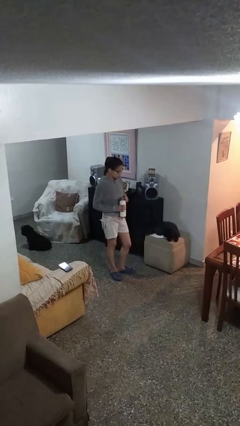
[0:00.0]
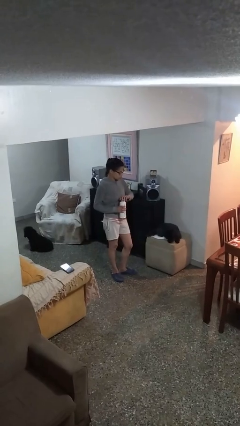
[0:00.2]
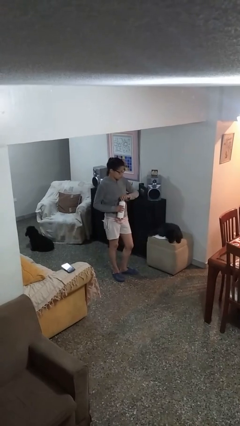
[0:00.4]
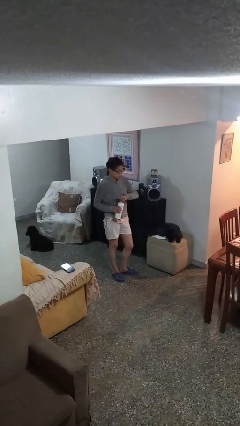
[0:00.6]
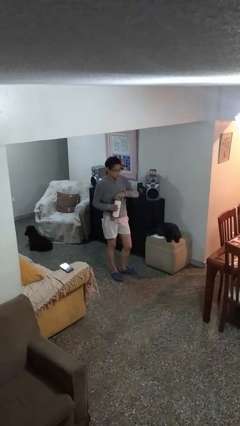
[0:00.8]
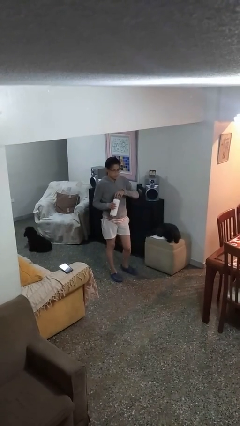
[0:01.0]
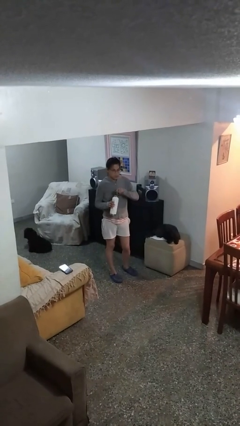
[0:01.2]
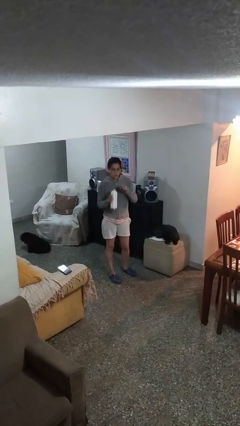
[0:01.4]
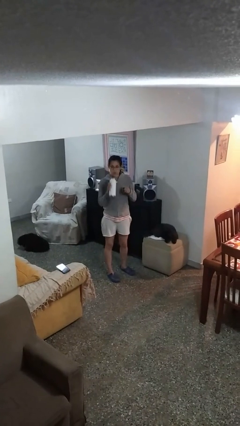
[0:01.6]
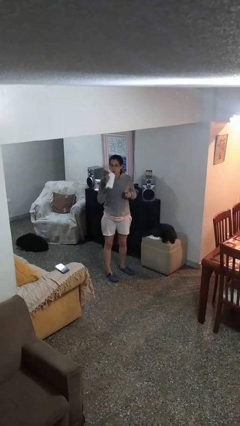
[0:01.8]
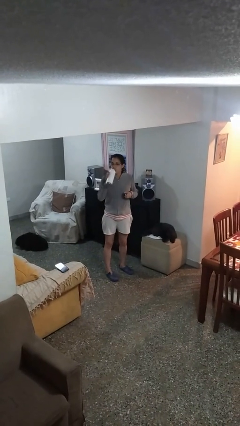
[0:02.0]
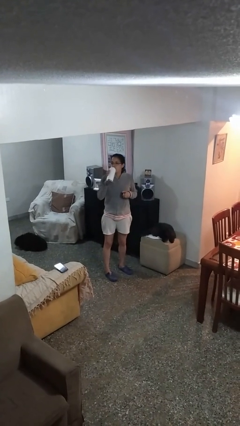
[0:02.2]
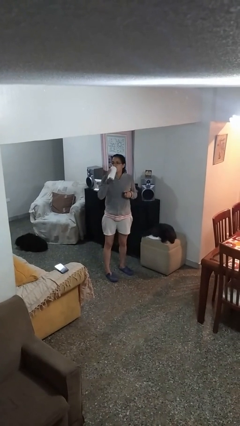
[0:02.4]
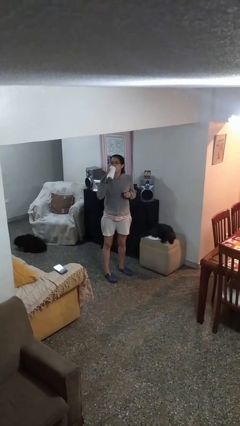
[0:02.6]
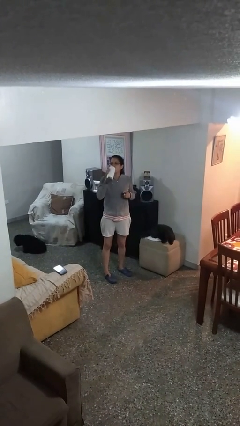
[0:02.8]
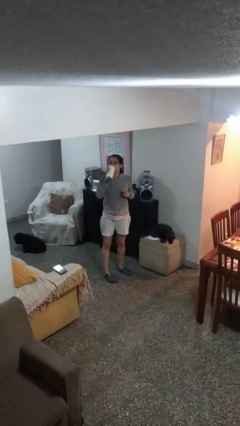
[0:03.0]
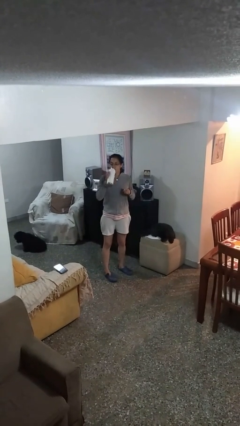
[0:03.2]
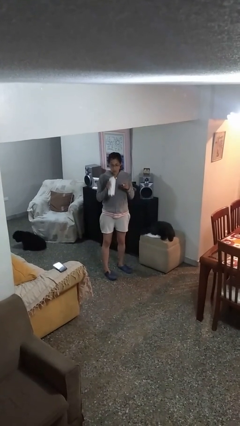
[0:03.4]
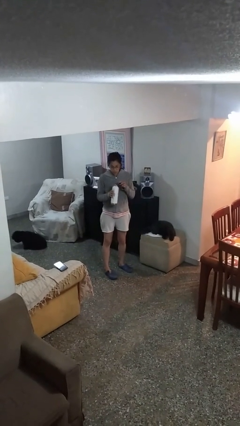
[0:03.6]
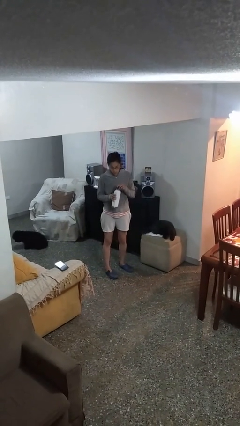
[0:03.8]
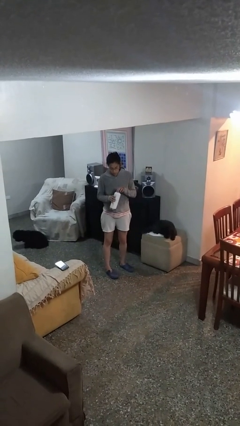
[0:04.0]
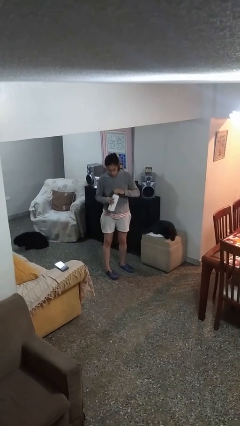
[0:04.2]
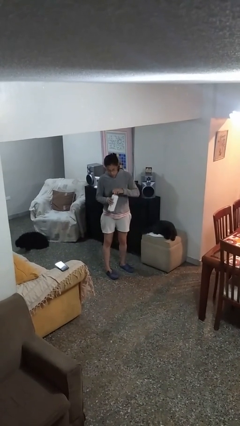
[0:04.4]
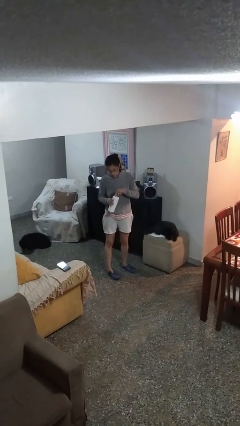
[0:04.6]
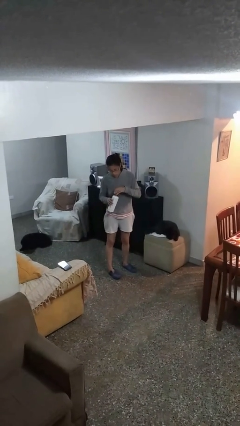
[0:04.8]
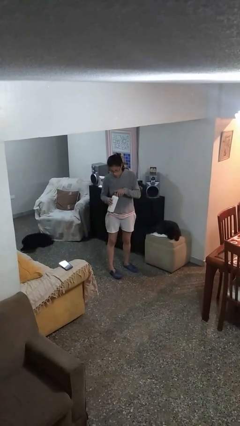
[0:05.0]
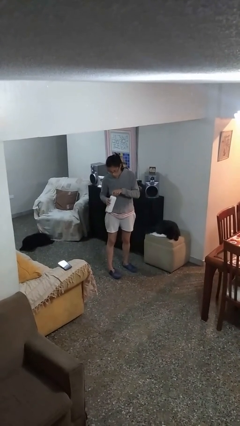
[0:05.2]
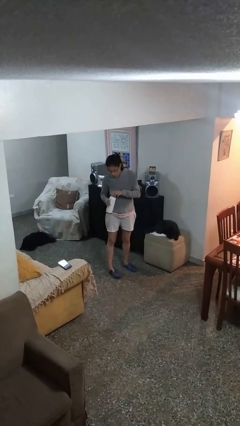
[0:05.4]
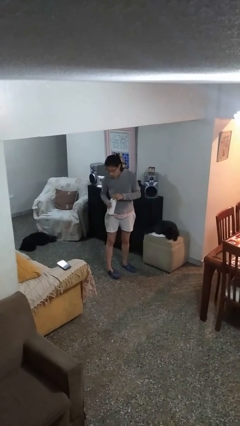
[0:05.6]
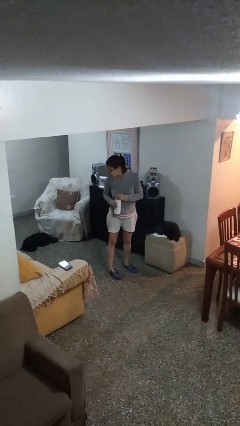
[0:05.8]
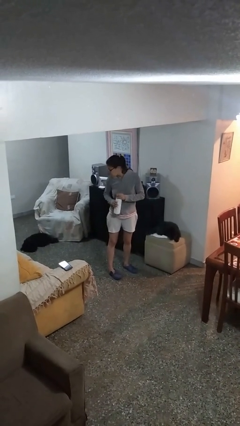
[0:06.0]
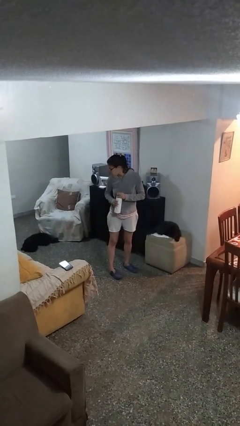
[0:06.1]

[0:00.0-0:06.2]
person drinks from bottle

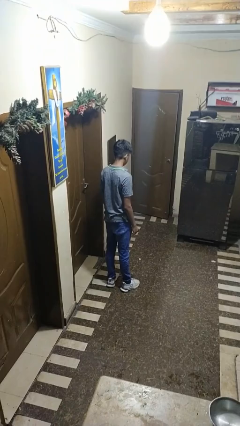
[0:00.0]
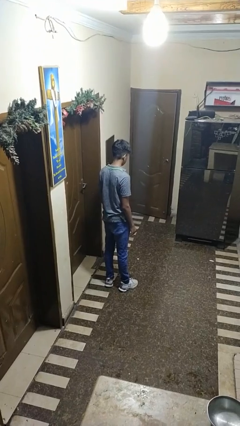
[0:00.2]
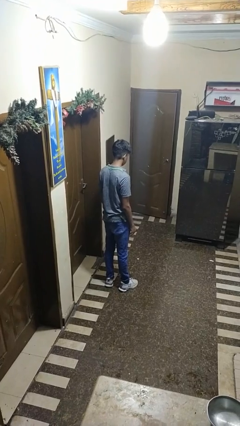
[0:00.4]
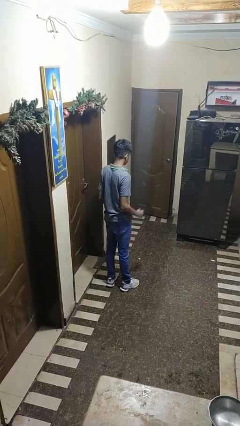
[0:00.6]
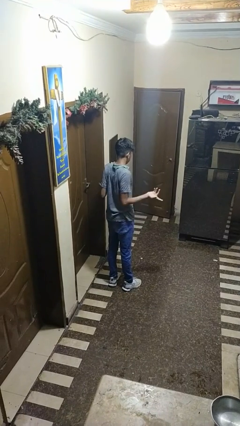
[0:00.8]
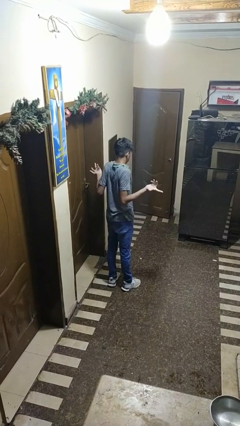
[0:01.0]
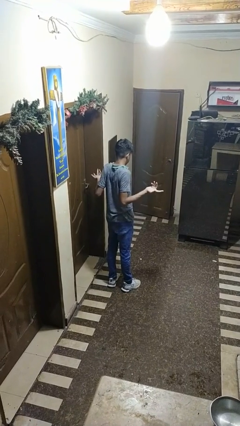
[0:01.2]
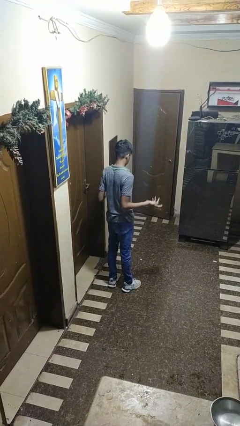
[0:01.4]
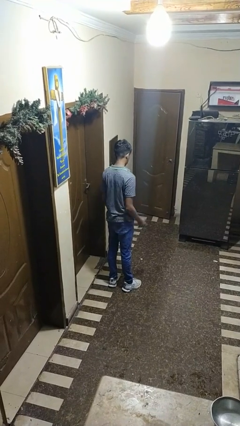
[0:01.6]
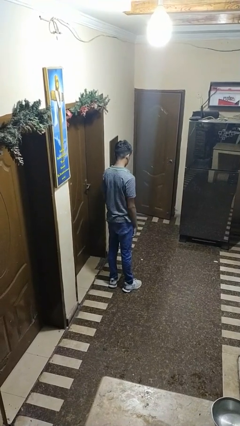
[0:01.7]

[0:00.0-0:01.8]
person shrugs

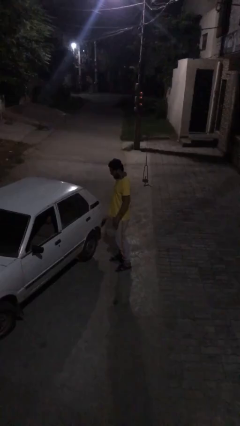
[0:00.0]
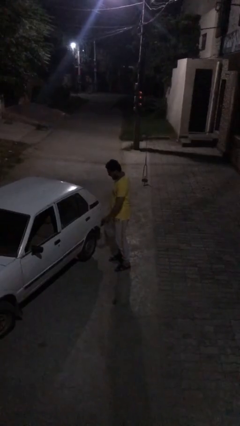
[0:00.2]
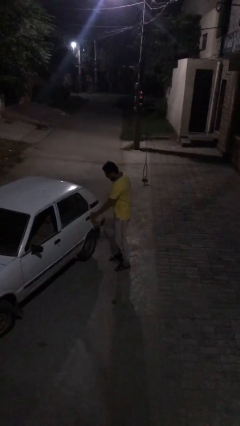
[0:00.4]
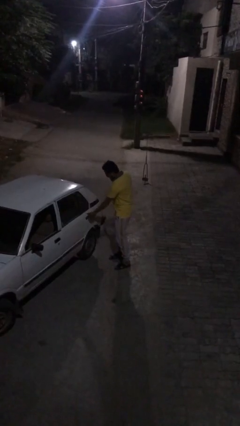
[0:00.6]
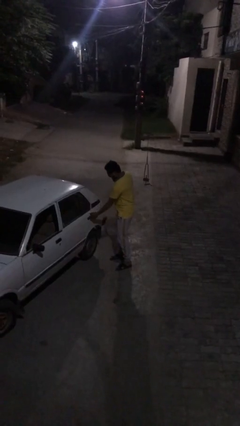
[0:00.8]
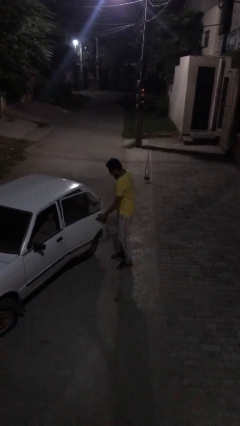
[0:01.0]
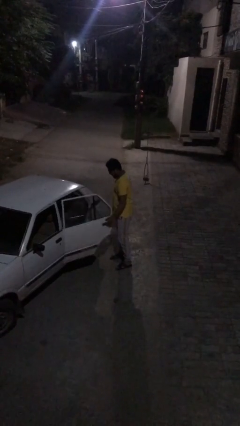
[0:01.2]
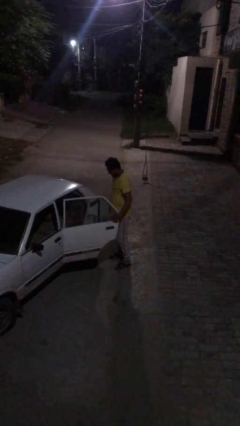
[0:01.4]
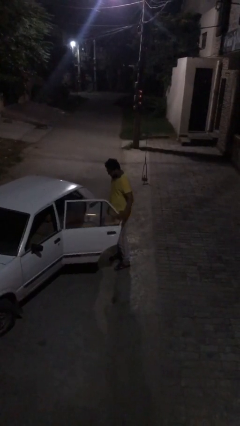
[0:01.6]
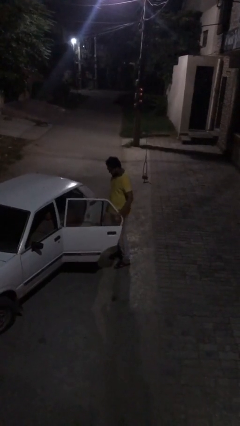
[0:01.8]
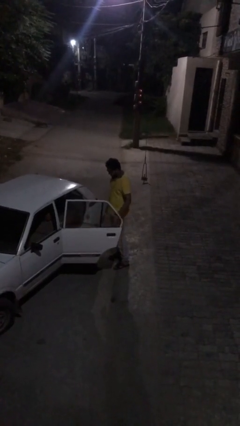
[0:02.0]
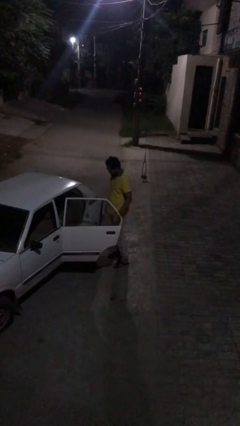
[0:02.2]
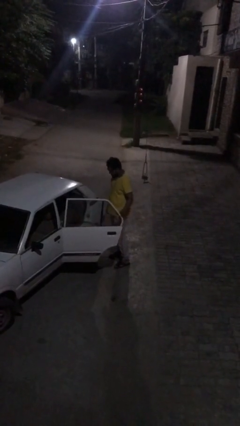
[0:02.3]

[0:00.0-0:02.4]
person opens car door

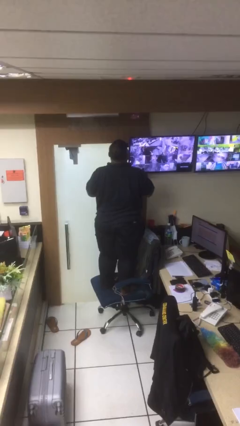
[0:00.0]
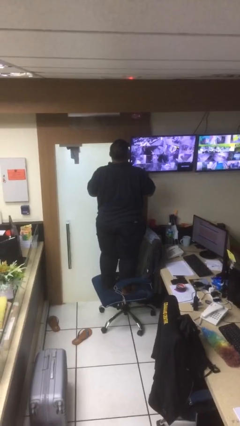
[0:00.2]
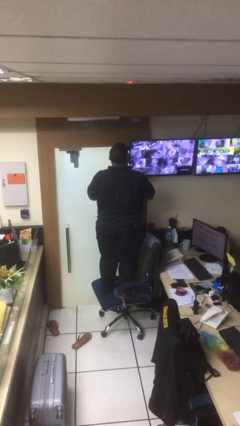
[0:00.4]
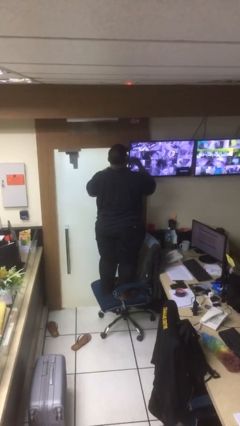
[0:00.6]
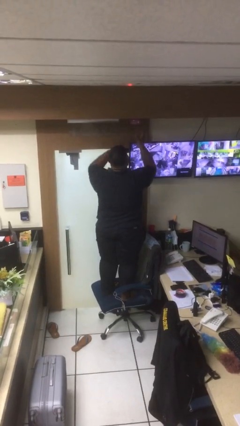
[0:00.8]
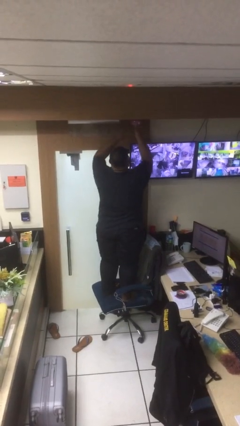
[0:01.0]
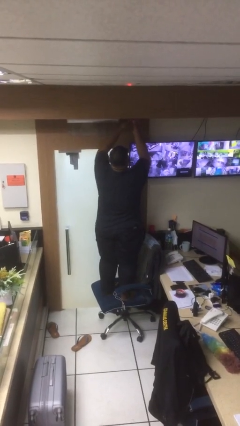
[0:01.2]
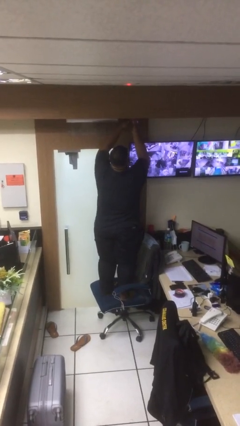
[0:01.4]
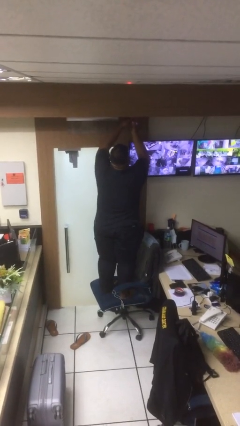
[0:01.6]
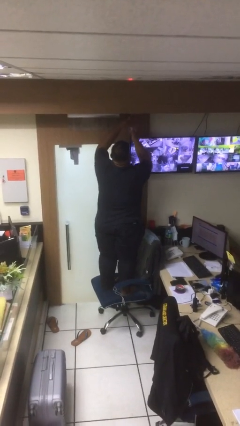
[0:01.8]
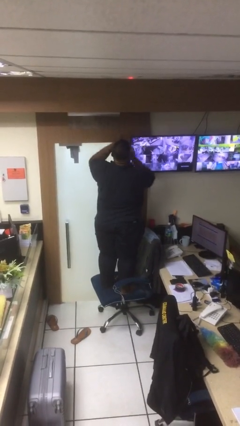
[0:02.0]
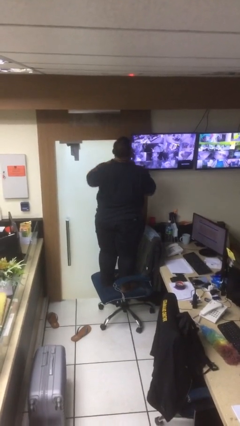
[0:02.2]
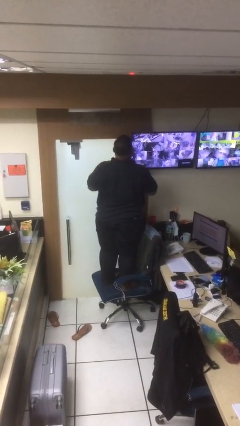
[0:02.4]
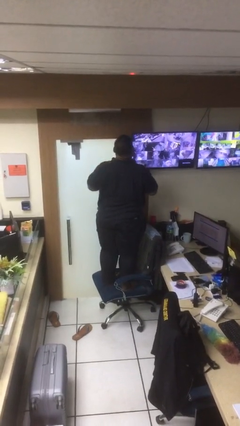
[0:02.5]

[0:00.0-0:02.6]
person takes down smoke detector

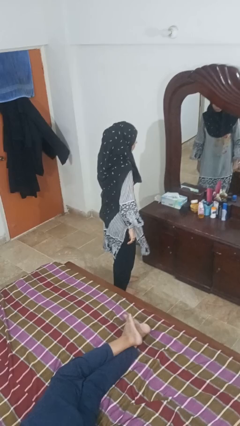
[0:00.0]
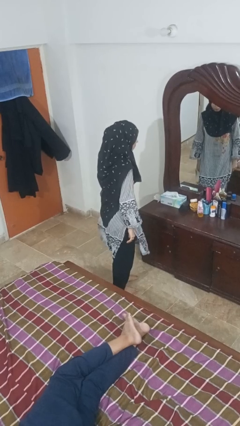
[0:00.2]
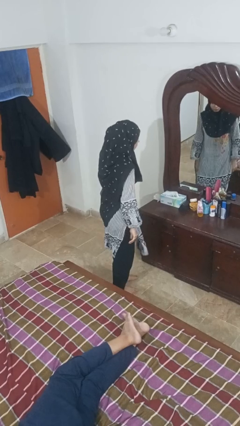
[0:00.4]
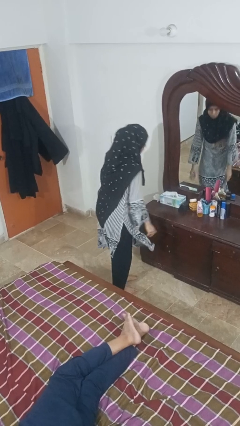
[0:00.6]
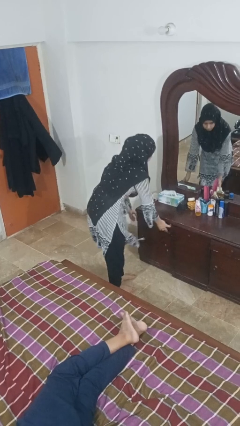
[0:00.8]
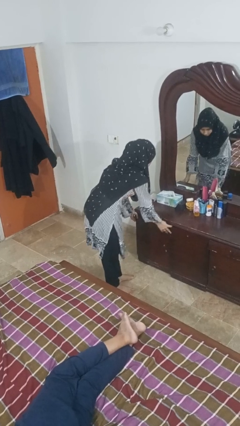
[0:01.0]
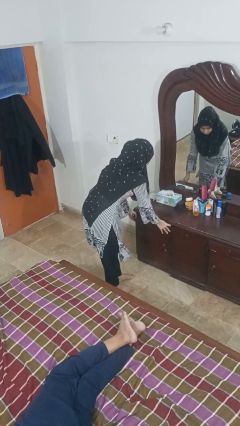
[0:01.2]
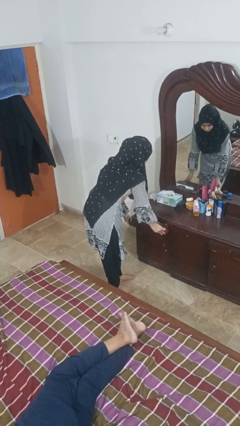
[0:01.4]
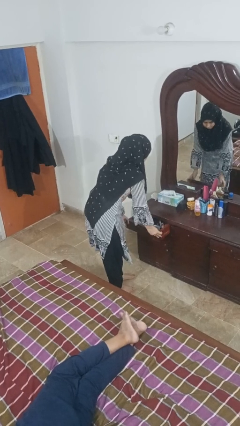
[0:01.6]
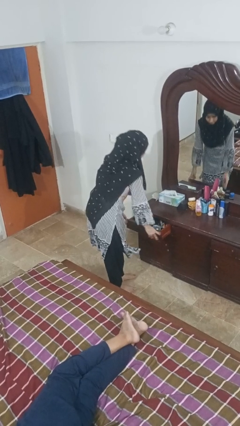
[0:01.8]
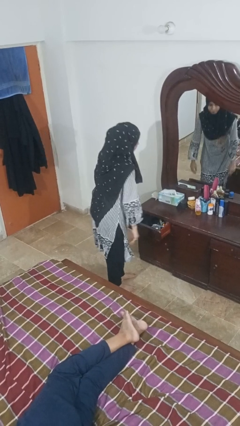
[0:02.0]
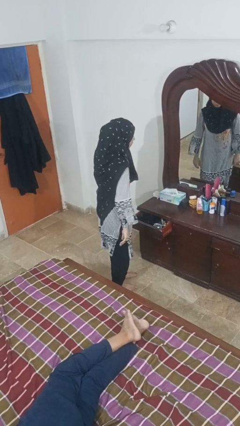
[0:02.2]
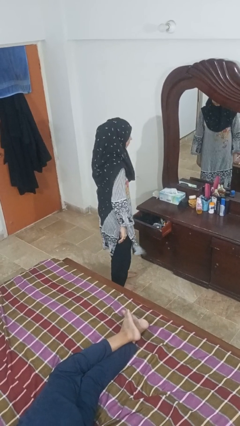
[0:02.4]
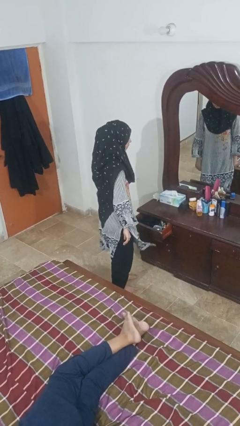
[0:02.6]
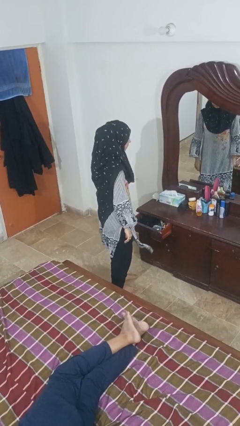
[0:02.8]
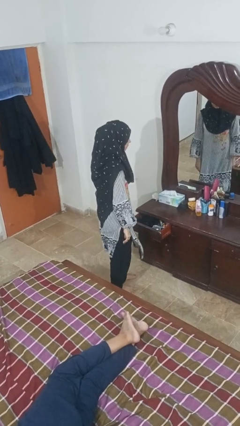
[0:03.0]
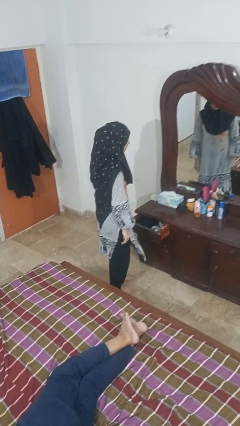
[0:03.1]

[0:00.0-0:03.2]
person opens dresser drawer

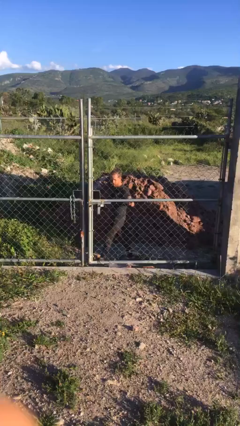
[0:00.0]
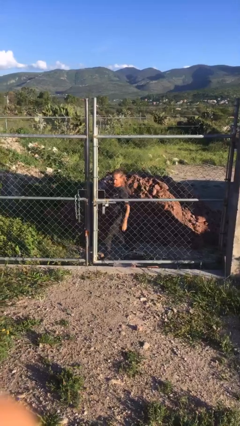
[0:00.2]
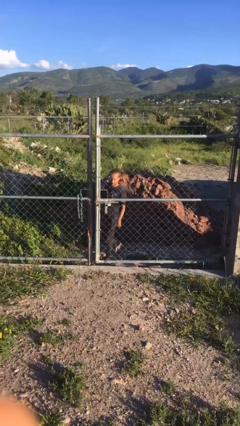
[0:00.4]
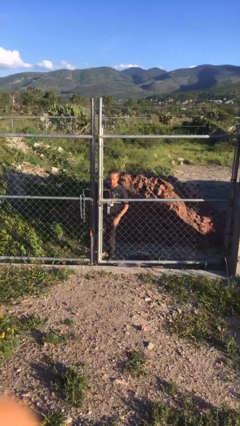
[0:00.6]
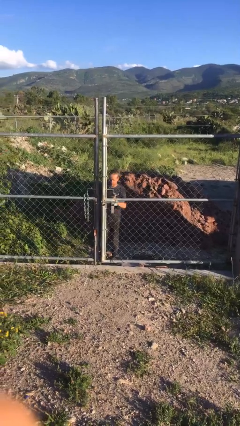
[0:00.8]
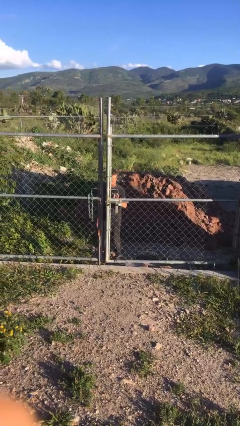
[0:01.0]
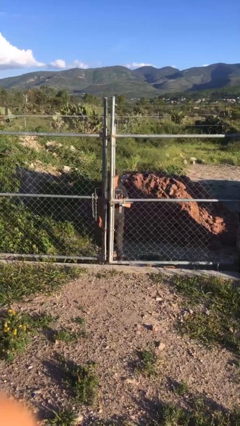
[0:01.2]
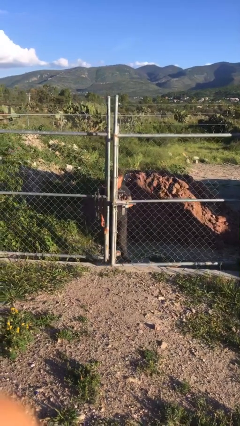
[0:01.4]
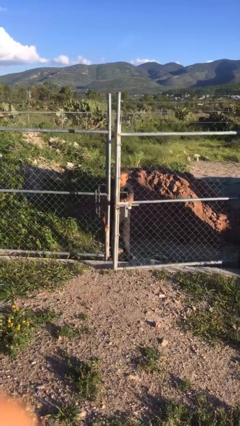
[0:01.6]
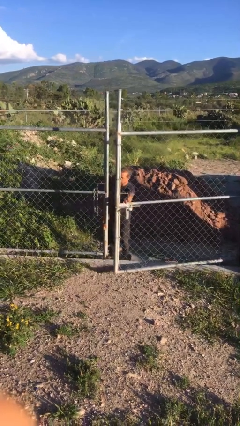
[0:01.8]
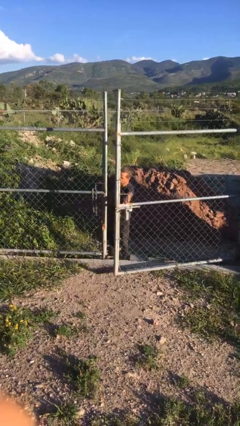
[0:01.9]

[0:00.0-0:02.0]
person opens gate
